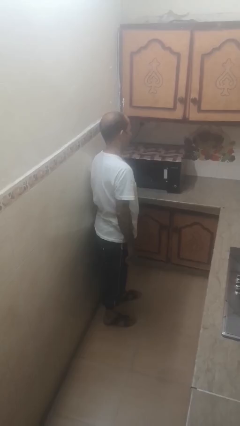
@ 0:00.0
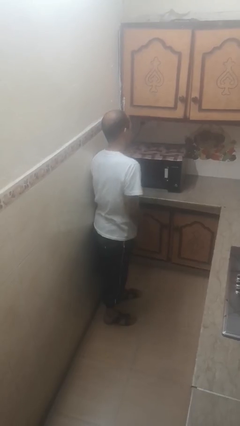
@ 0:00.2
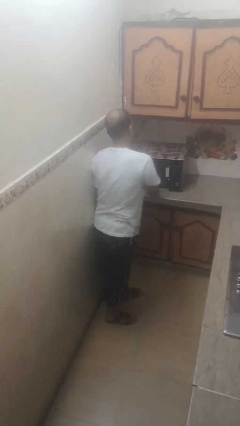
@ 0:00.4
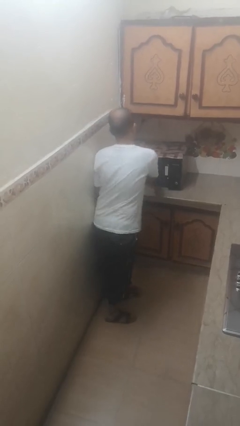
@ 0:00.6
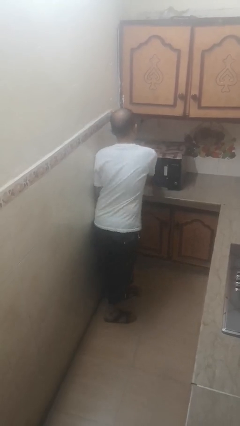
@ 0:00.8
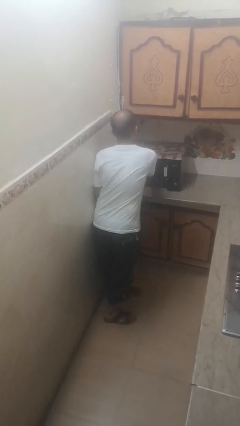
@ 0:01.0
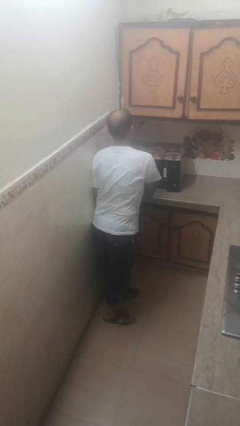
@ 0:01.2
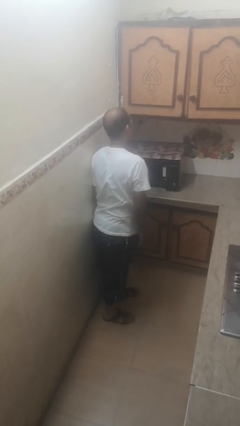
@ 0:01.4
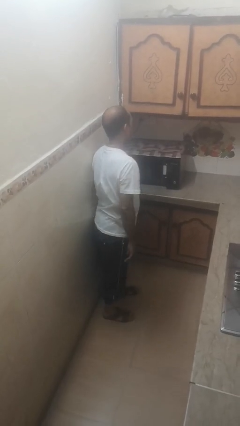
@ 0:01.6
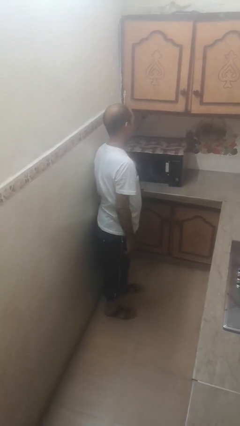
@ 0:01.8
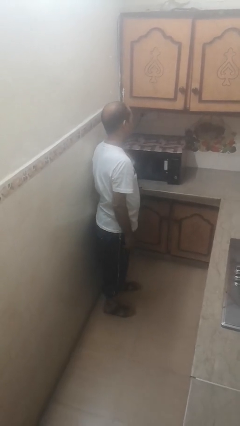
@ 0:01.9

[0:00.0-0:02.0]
person puts object into microwave

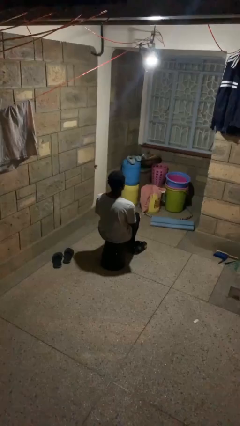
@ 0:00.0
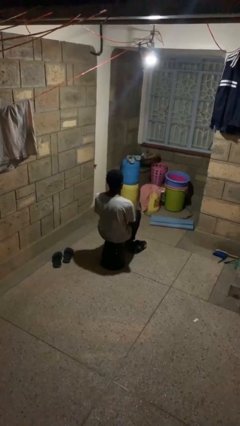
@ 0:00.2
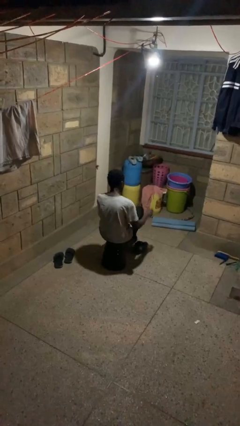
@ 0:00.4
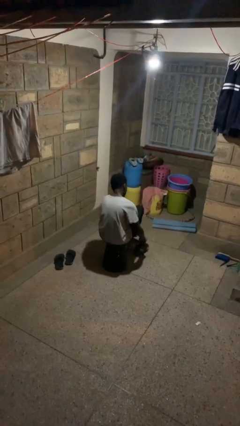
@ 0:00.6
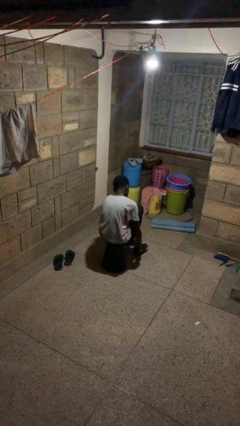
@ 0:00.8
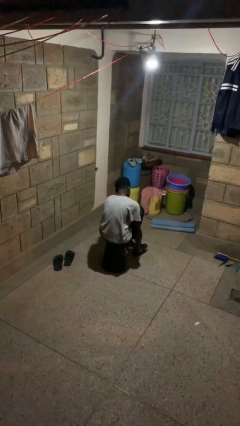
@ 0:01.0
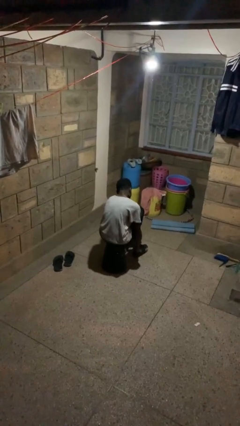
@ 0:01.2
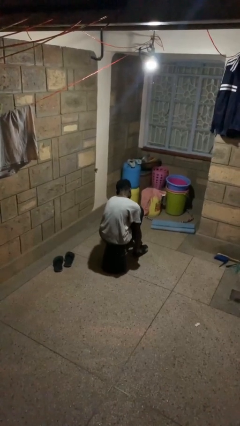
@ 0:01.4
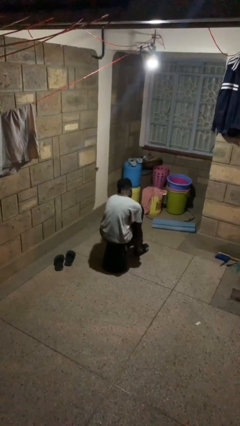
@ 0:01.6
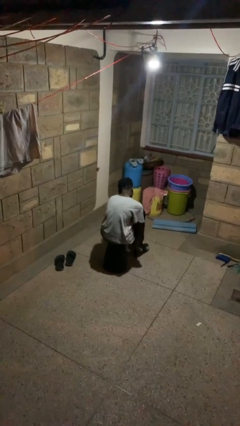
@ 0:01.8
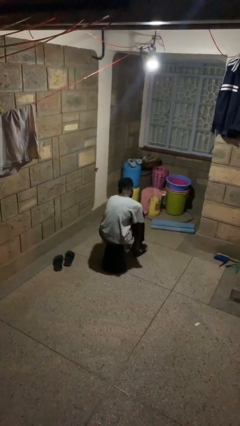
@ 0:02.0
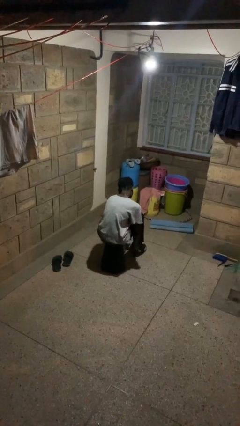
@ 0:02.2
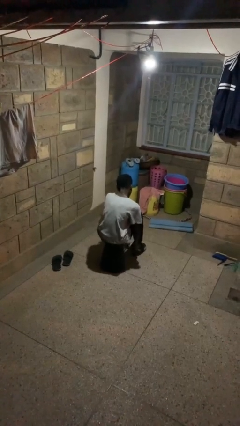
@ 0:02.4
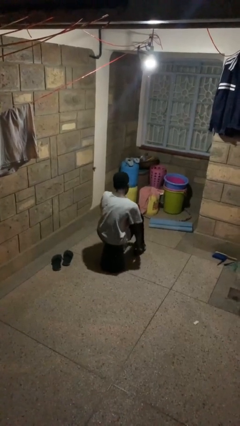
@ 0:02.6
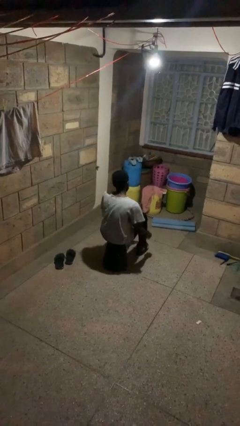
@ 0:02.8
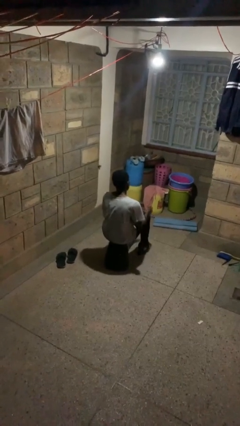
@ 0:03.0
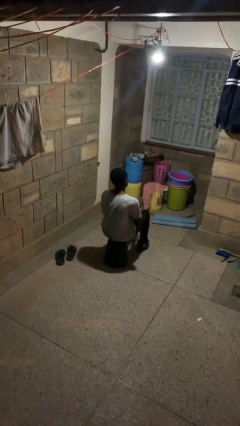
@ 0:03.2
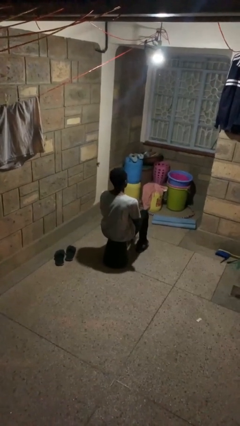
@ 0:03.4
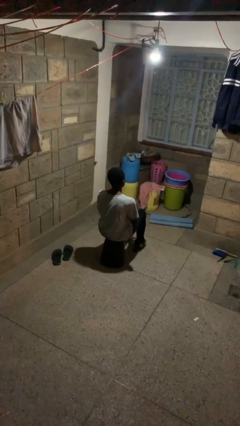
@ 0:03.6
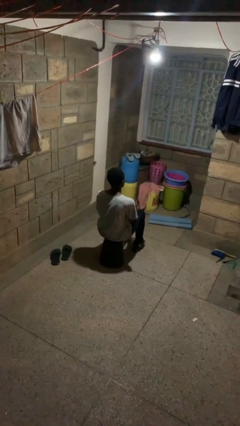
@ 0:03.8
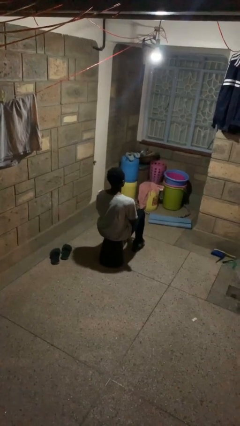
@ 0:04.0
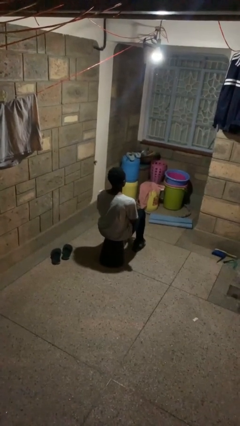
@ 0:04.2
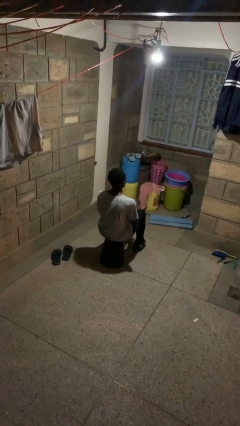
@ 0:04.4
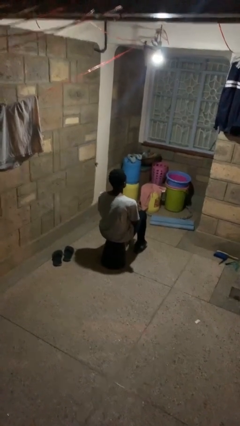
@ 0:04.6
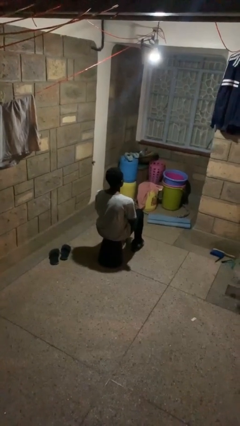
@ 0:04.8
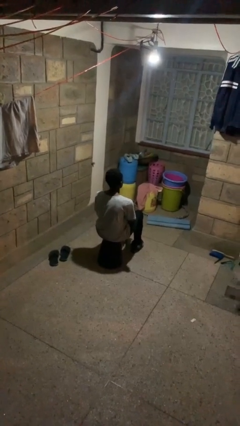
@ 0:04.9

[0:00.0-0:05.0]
person puts on shoes

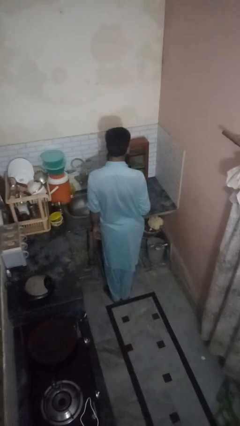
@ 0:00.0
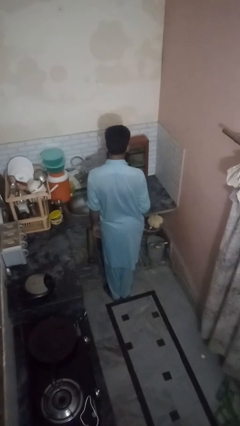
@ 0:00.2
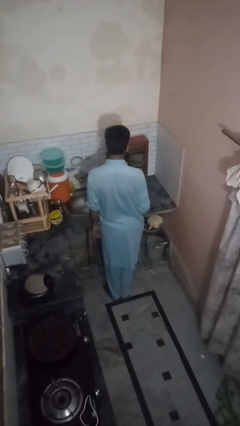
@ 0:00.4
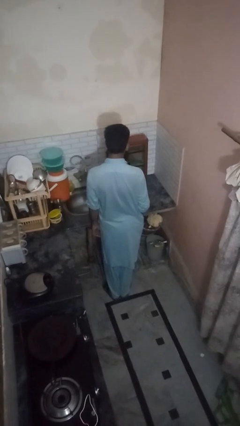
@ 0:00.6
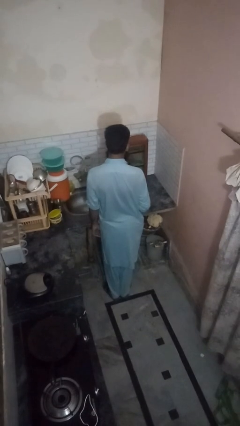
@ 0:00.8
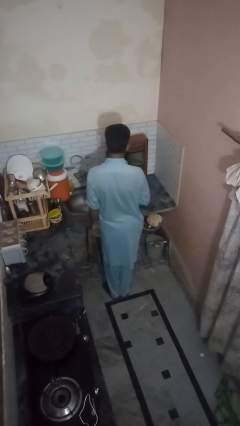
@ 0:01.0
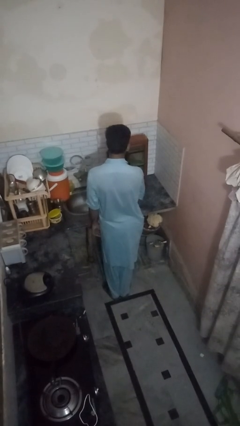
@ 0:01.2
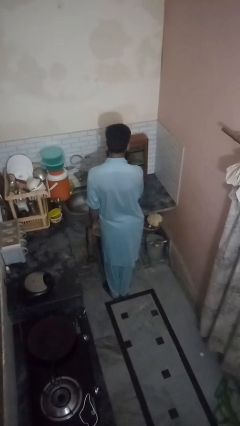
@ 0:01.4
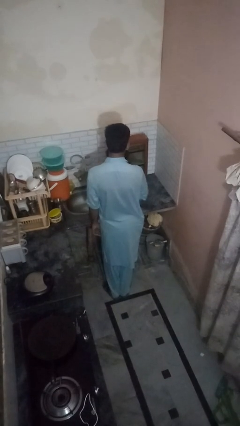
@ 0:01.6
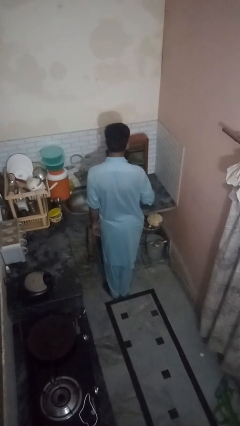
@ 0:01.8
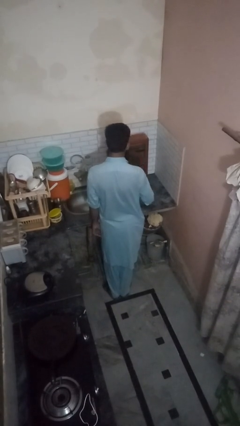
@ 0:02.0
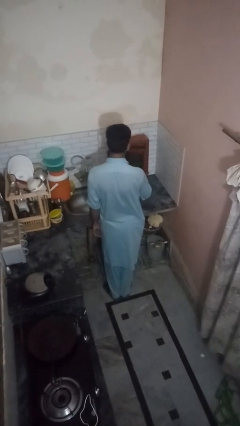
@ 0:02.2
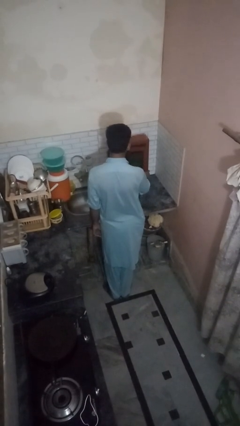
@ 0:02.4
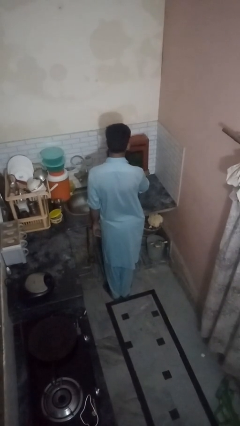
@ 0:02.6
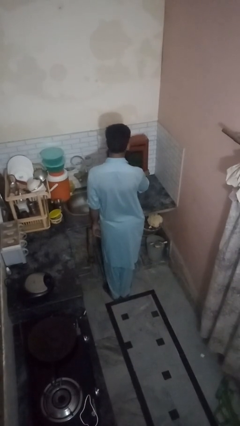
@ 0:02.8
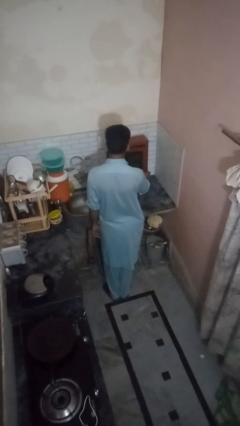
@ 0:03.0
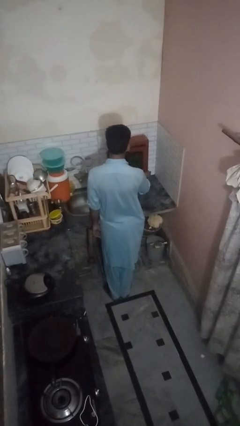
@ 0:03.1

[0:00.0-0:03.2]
person closes kitchen drawer

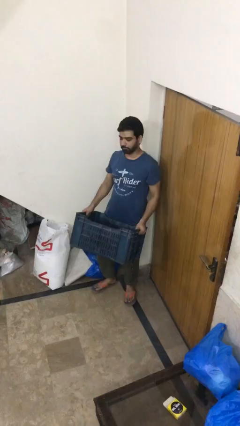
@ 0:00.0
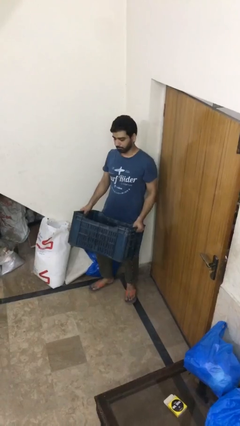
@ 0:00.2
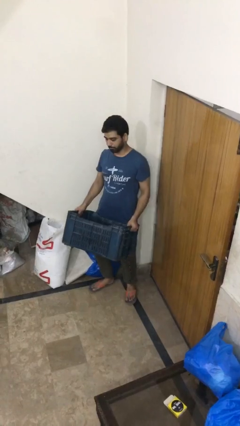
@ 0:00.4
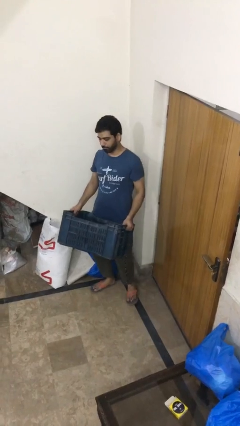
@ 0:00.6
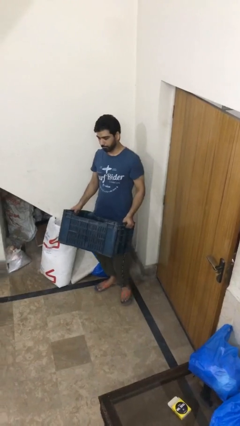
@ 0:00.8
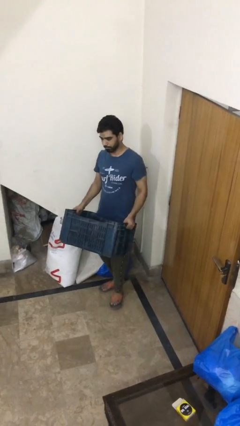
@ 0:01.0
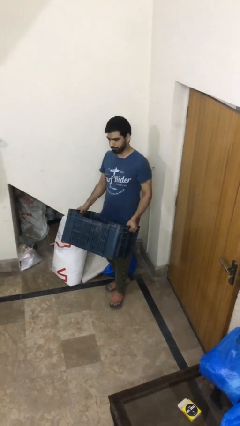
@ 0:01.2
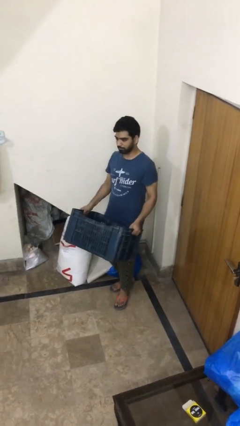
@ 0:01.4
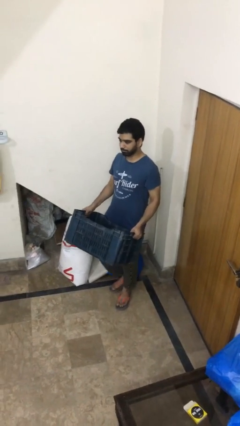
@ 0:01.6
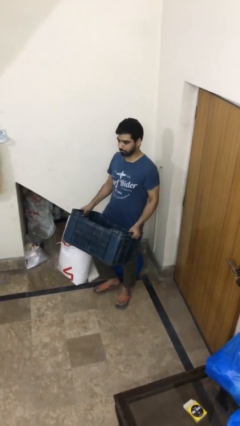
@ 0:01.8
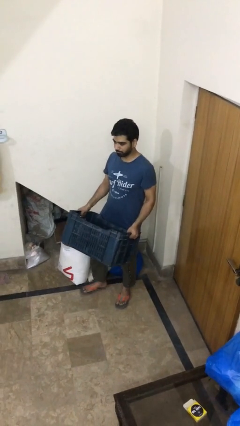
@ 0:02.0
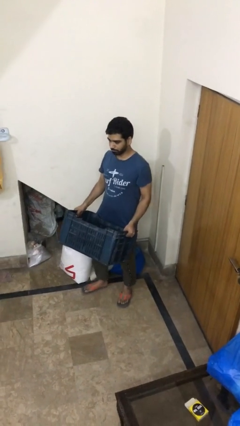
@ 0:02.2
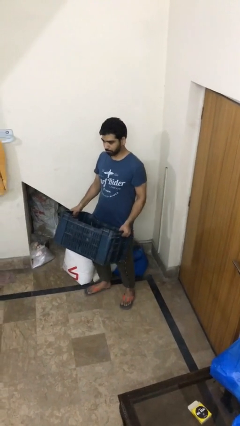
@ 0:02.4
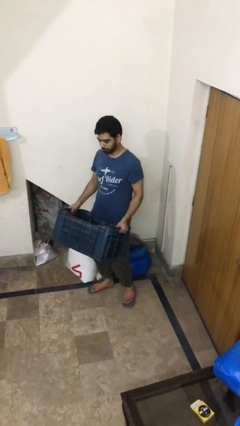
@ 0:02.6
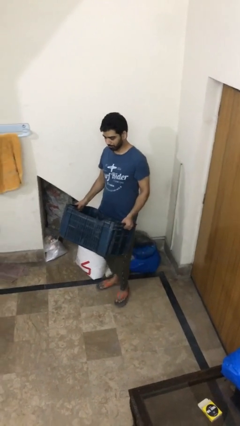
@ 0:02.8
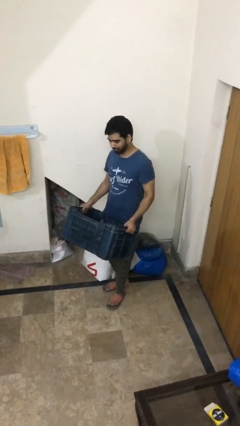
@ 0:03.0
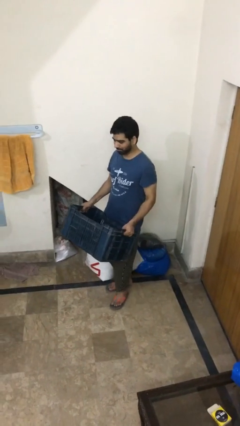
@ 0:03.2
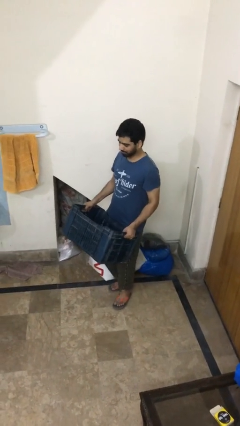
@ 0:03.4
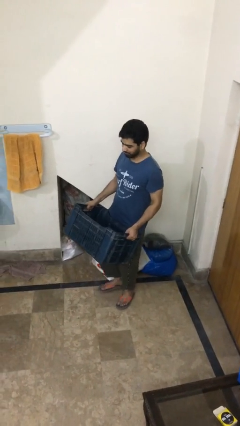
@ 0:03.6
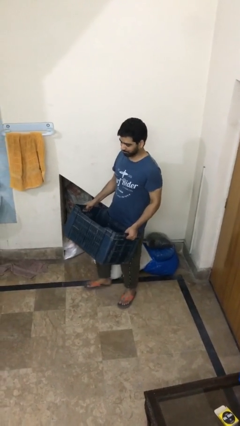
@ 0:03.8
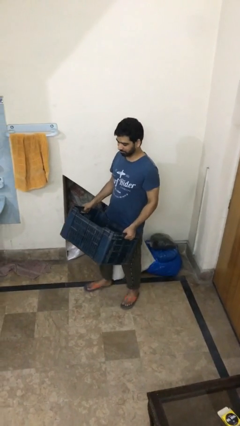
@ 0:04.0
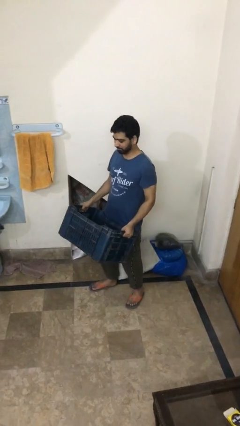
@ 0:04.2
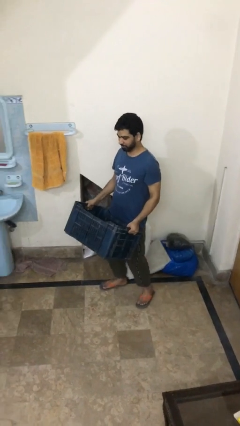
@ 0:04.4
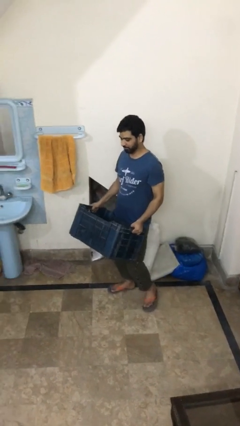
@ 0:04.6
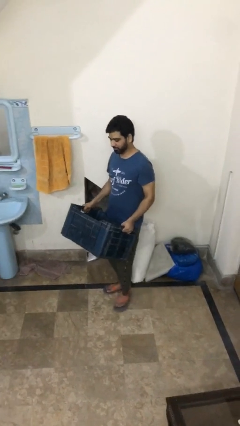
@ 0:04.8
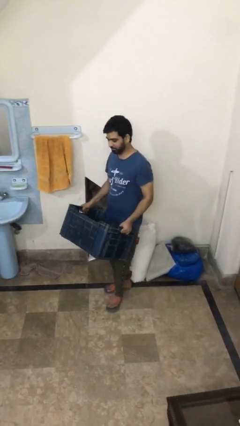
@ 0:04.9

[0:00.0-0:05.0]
person carries heavy object

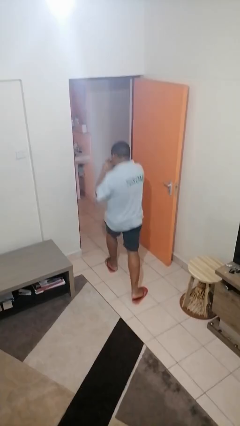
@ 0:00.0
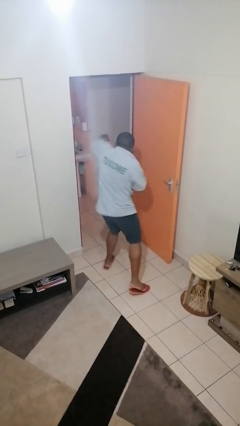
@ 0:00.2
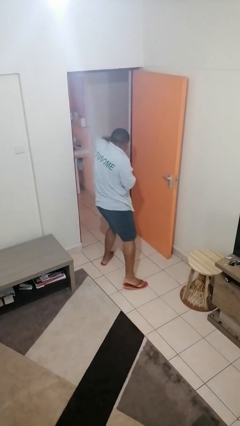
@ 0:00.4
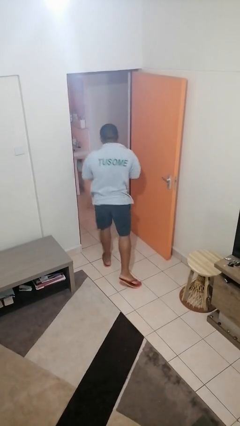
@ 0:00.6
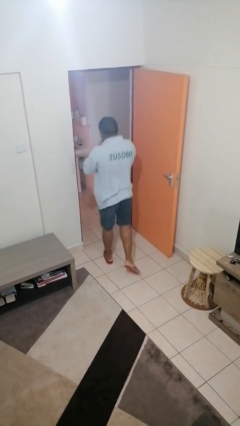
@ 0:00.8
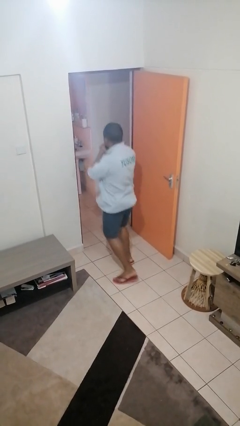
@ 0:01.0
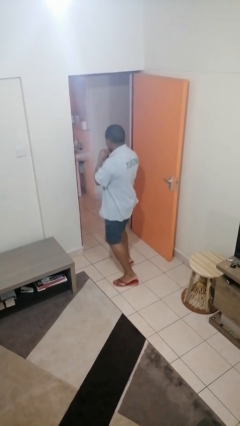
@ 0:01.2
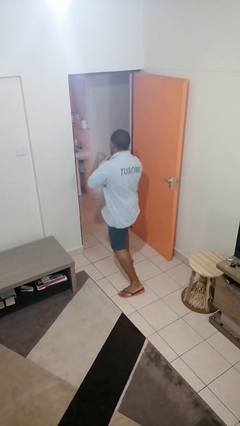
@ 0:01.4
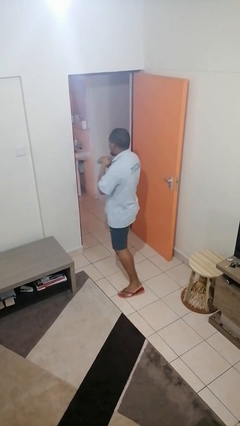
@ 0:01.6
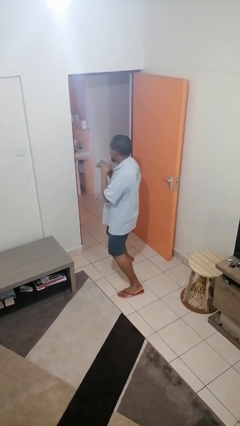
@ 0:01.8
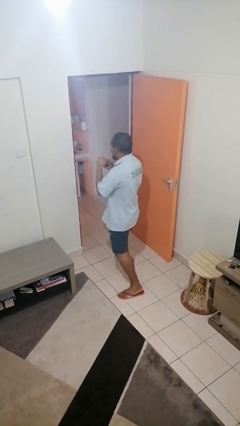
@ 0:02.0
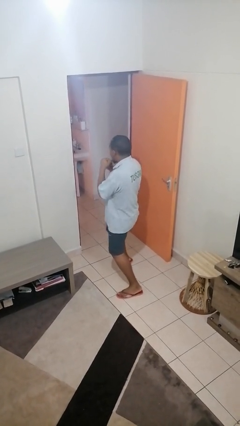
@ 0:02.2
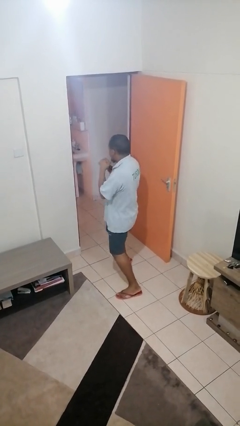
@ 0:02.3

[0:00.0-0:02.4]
person punches
